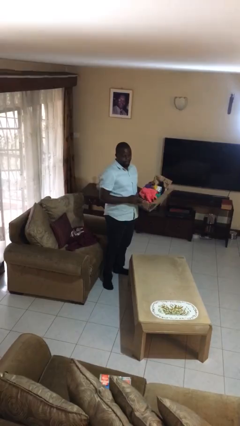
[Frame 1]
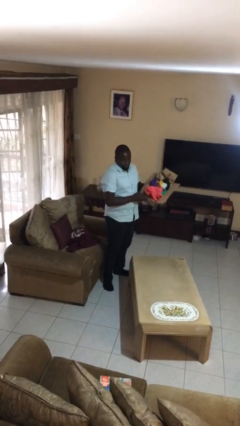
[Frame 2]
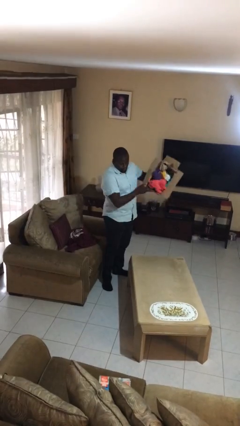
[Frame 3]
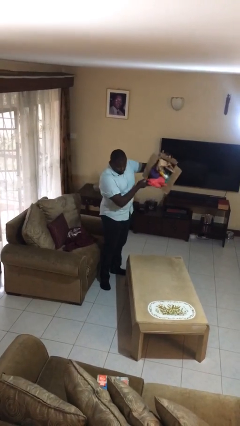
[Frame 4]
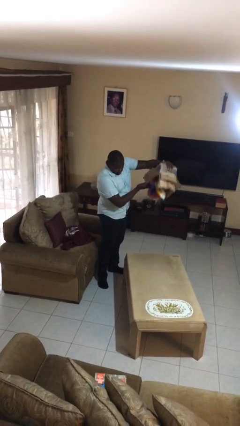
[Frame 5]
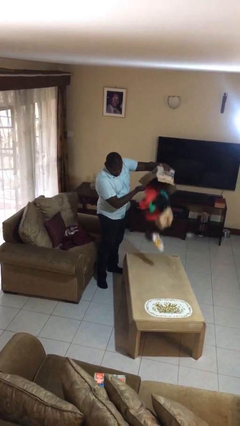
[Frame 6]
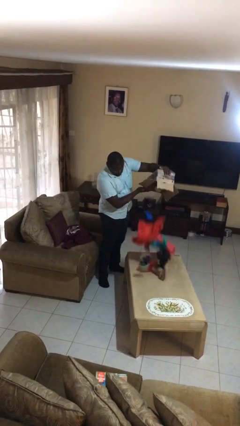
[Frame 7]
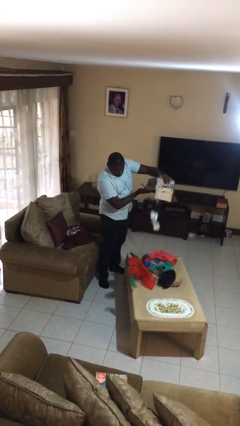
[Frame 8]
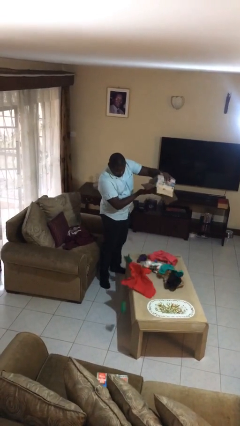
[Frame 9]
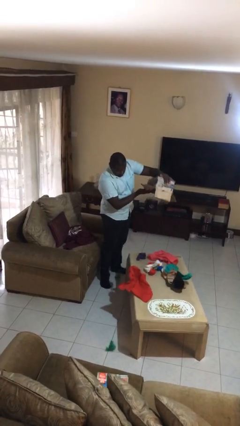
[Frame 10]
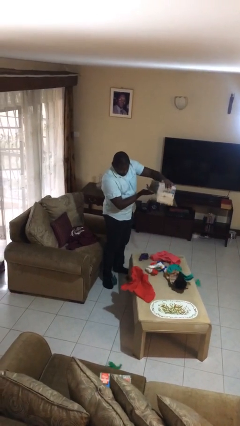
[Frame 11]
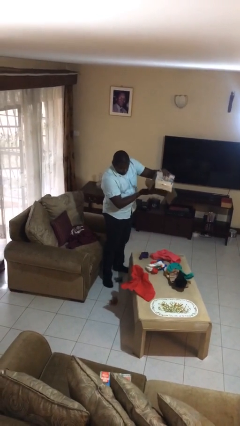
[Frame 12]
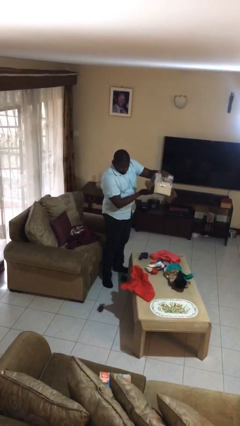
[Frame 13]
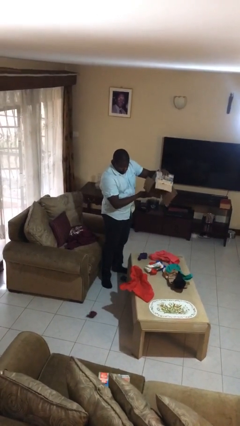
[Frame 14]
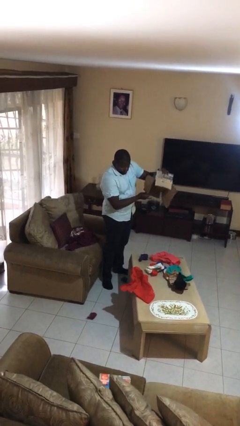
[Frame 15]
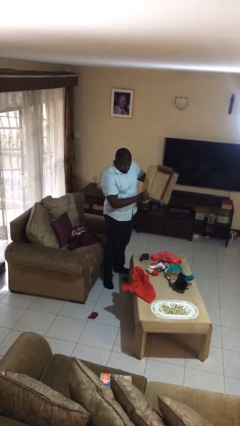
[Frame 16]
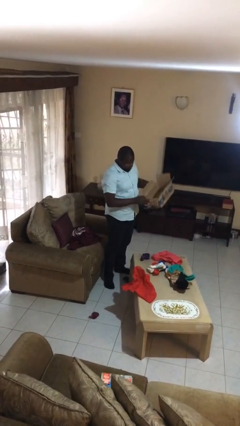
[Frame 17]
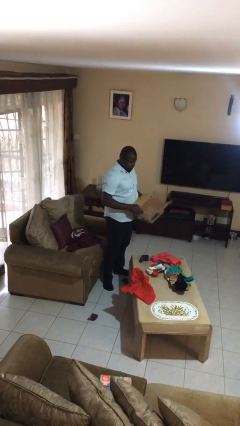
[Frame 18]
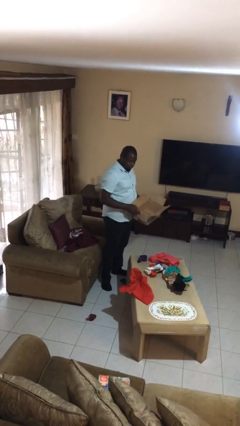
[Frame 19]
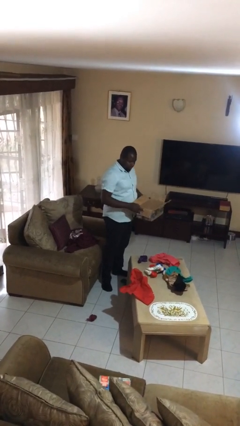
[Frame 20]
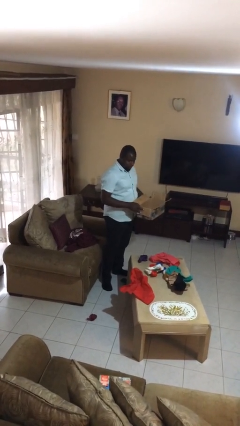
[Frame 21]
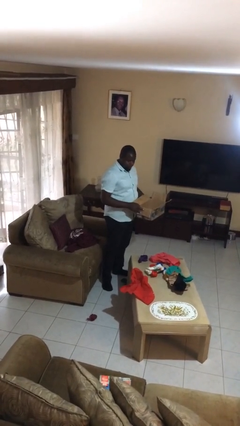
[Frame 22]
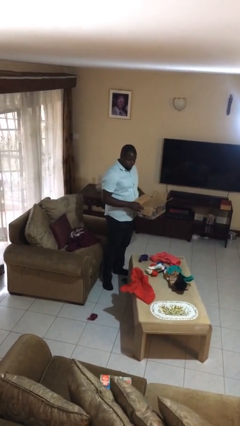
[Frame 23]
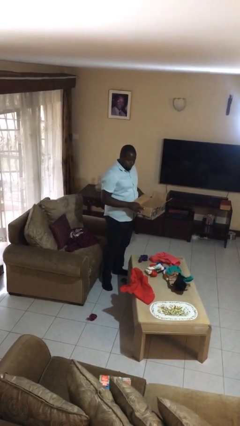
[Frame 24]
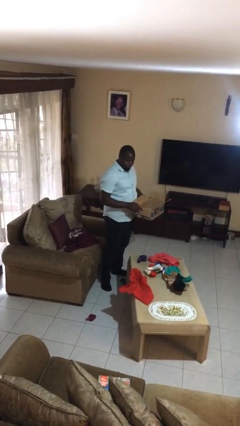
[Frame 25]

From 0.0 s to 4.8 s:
person unloads box onto table

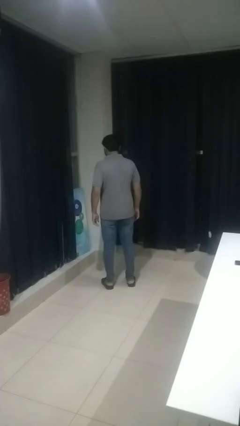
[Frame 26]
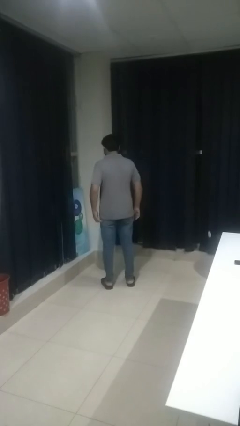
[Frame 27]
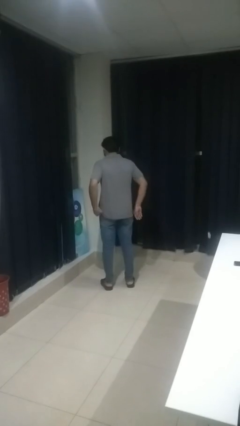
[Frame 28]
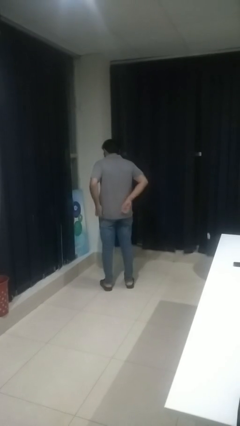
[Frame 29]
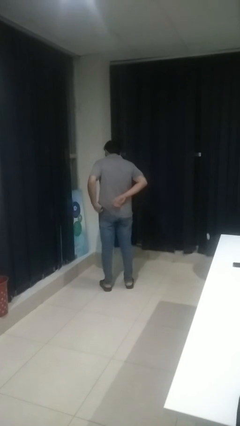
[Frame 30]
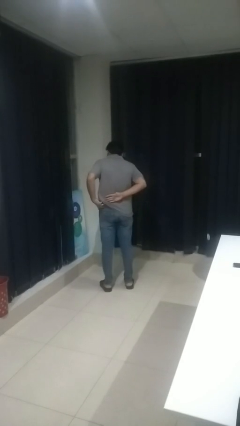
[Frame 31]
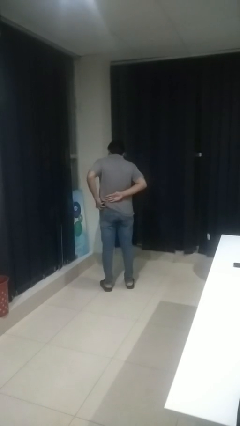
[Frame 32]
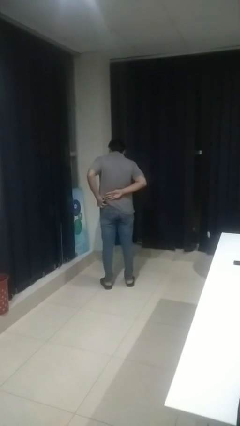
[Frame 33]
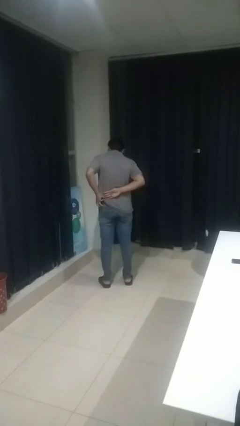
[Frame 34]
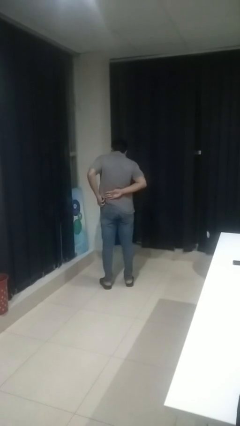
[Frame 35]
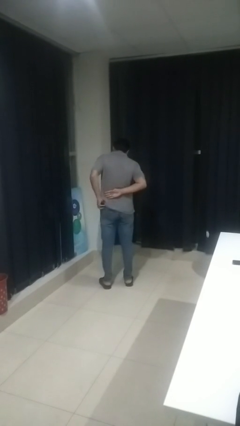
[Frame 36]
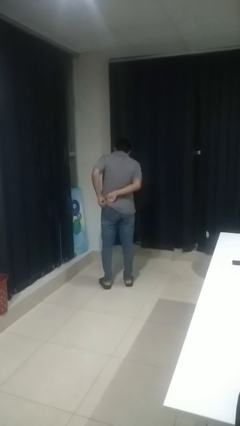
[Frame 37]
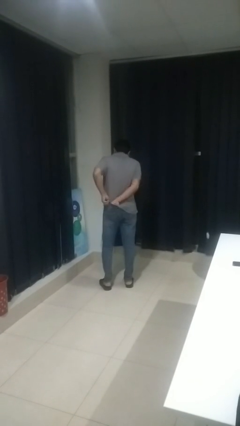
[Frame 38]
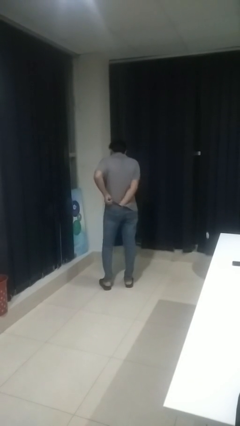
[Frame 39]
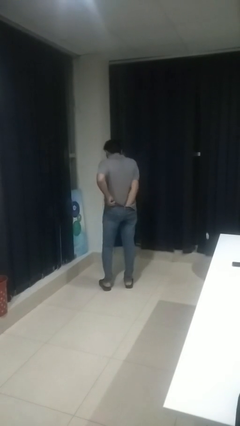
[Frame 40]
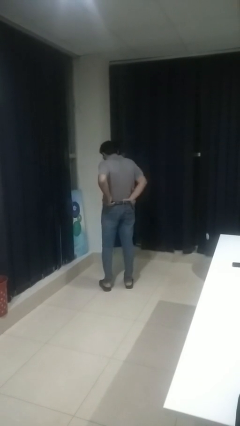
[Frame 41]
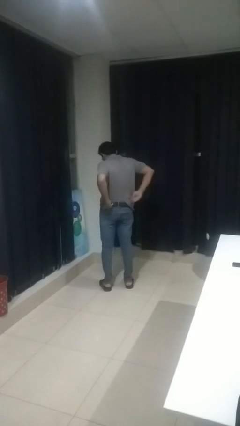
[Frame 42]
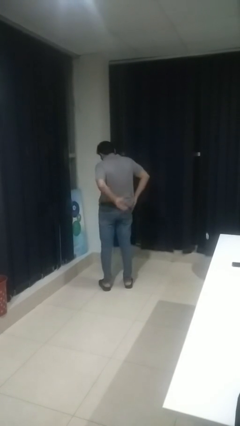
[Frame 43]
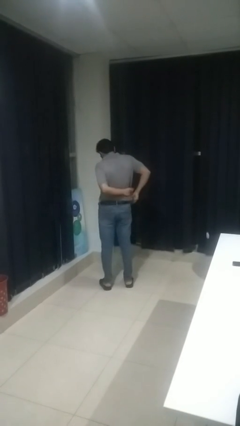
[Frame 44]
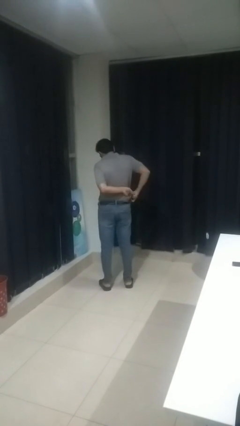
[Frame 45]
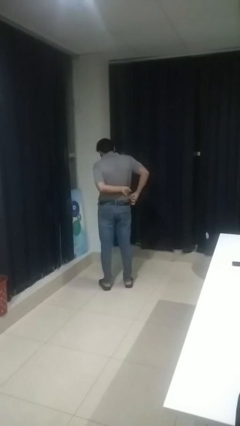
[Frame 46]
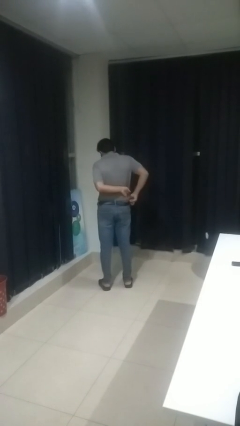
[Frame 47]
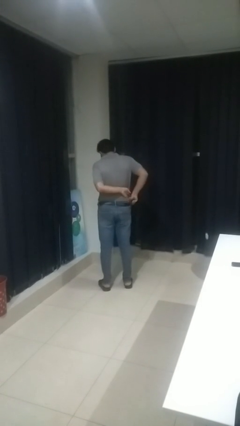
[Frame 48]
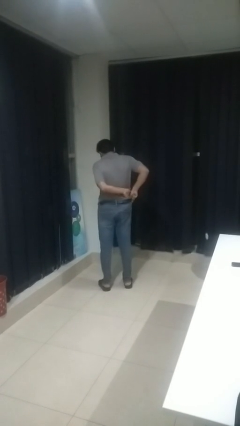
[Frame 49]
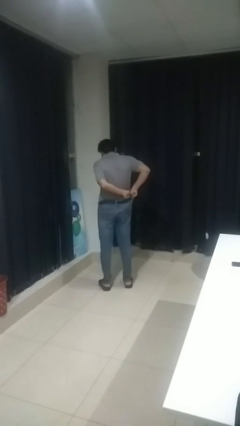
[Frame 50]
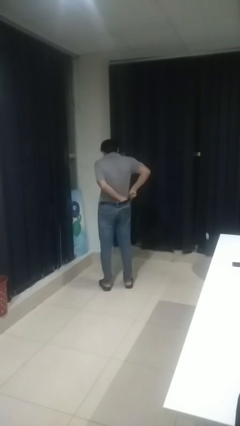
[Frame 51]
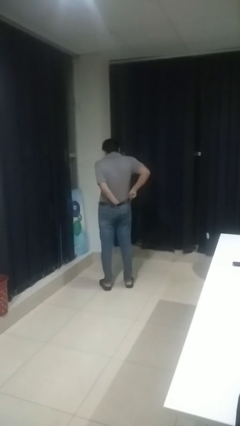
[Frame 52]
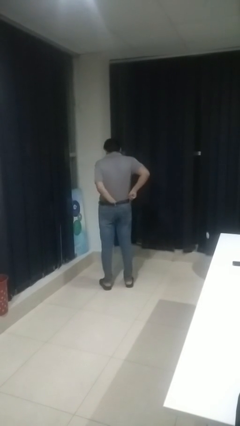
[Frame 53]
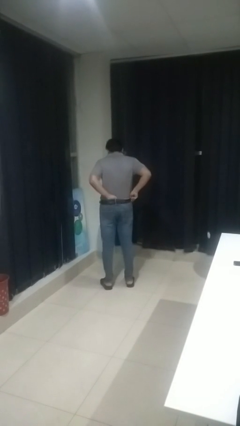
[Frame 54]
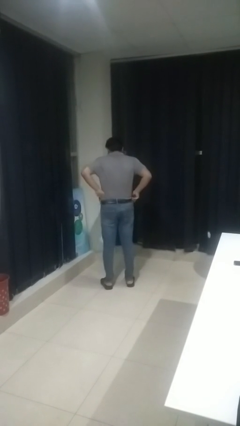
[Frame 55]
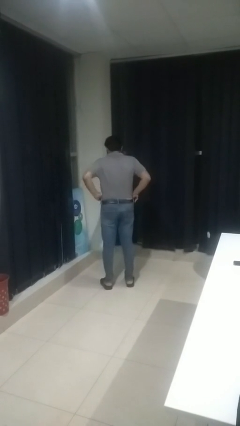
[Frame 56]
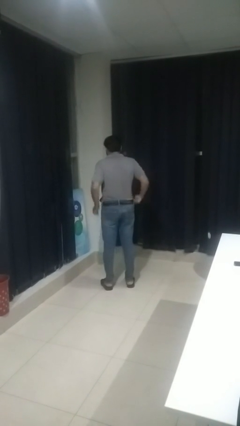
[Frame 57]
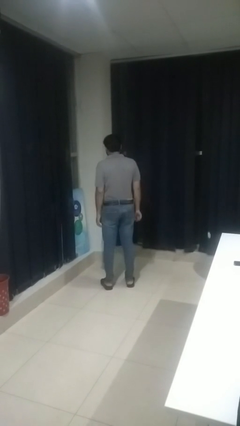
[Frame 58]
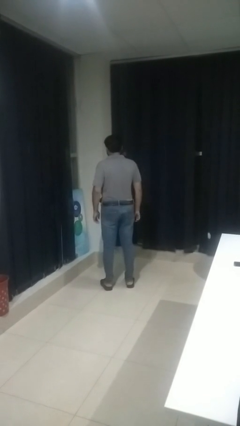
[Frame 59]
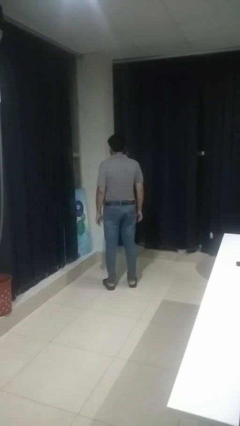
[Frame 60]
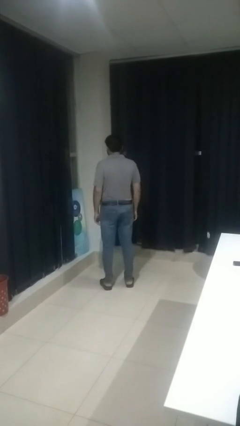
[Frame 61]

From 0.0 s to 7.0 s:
person tucks in shirt

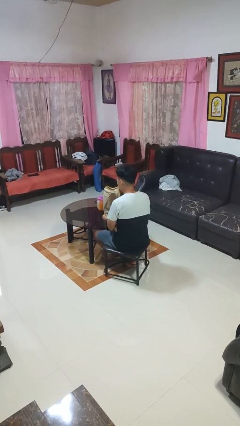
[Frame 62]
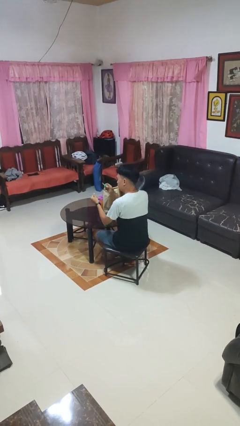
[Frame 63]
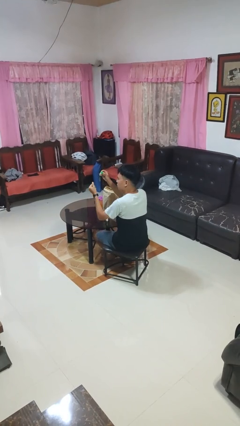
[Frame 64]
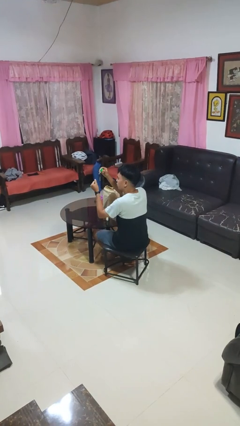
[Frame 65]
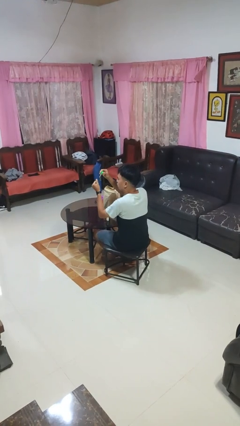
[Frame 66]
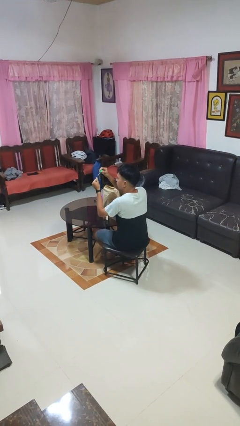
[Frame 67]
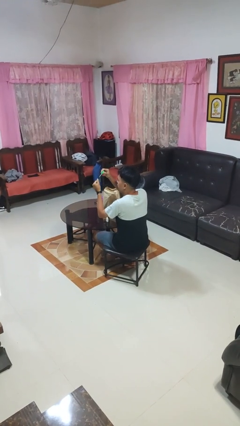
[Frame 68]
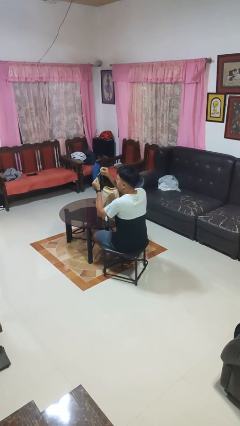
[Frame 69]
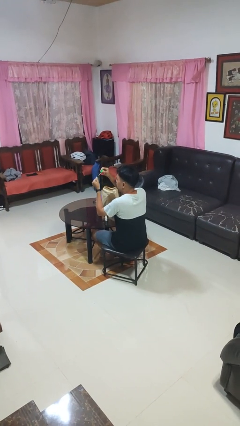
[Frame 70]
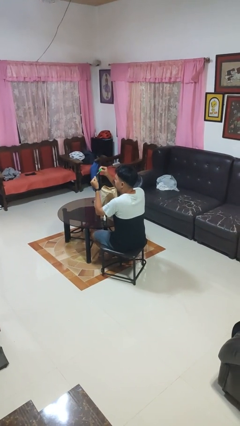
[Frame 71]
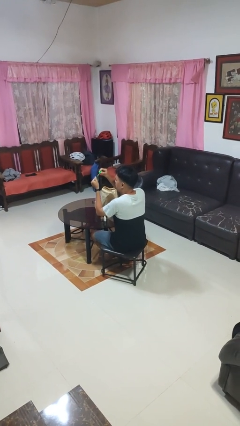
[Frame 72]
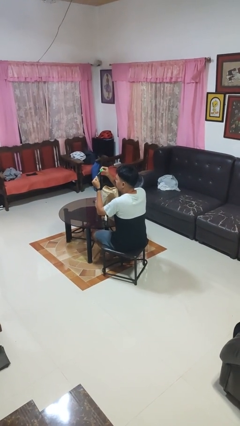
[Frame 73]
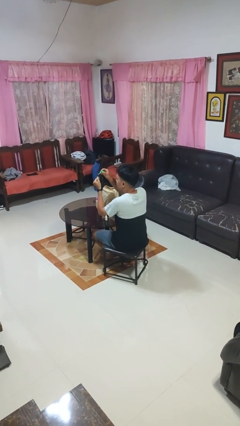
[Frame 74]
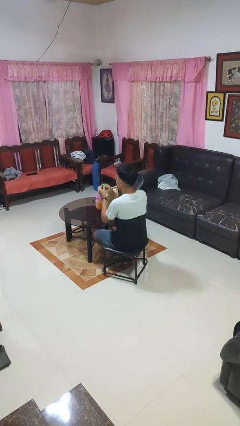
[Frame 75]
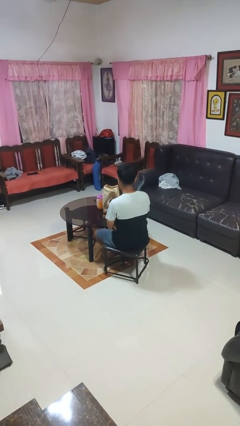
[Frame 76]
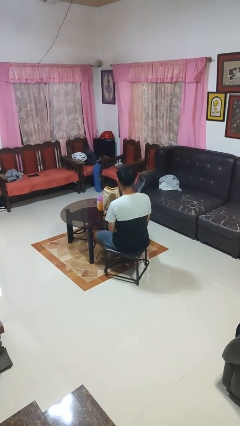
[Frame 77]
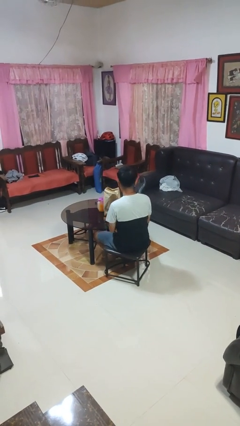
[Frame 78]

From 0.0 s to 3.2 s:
person paints fingernails

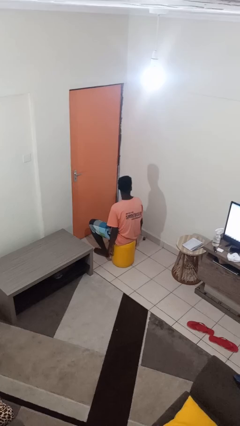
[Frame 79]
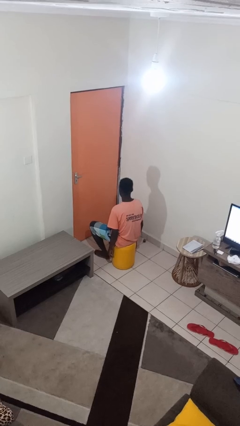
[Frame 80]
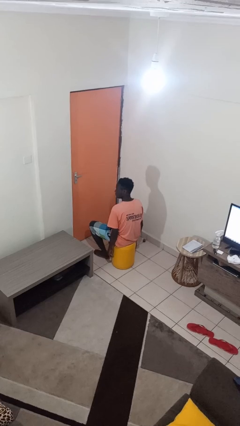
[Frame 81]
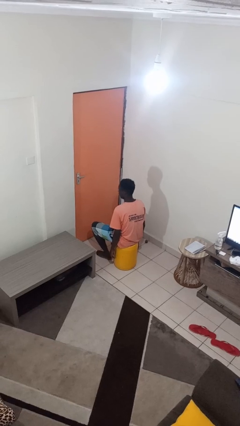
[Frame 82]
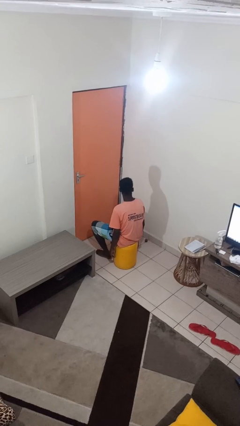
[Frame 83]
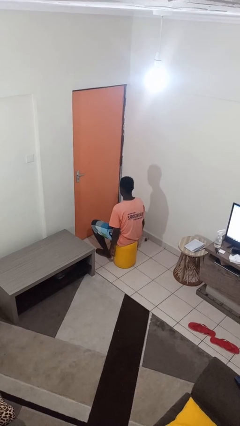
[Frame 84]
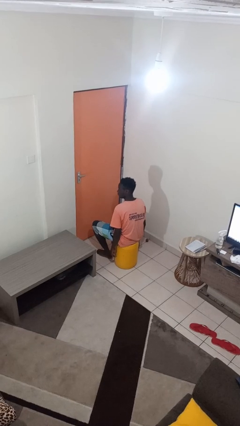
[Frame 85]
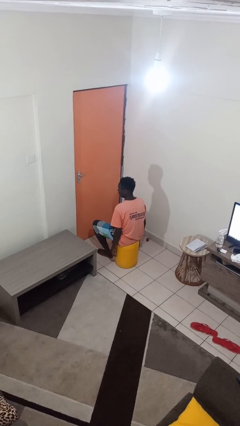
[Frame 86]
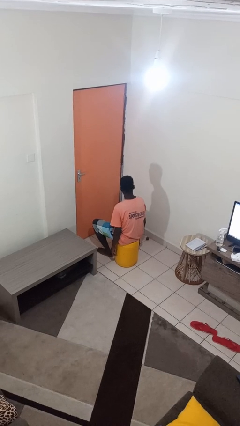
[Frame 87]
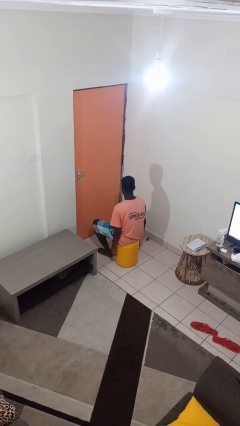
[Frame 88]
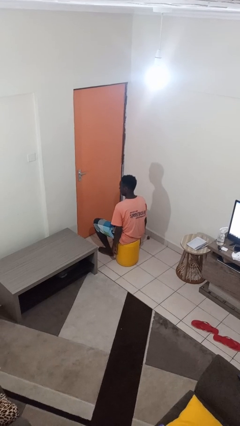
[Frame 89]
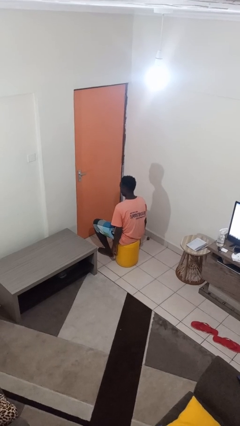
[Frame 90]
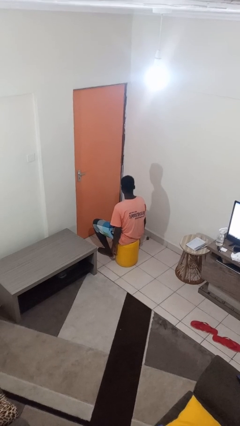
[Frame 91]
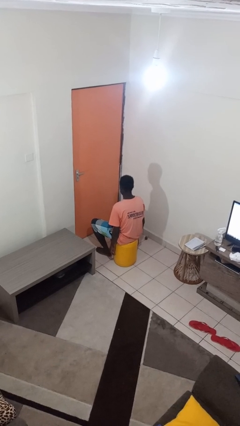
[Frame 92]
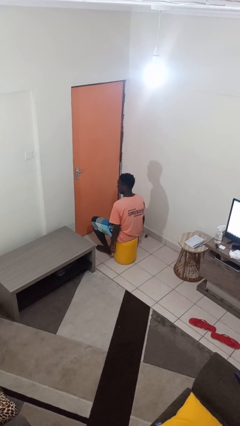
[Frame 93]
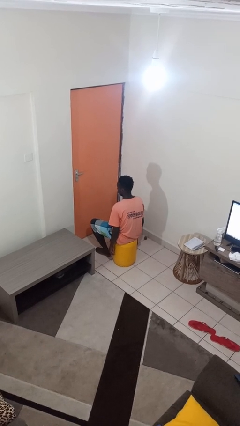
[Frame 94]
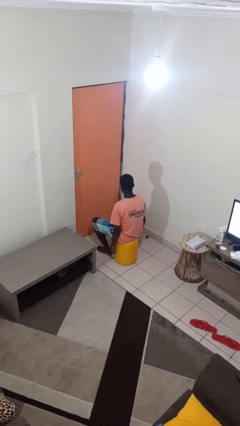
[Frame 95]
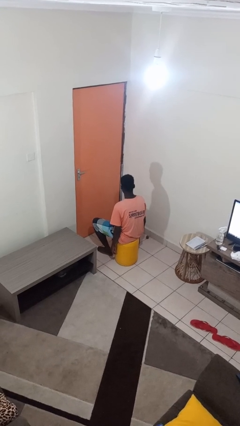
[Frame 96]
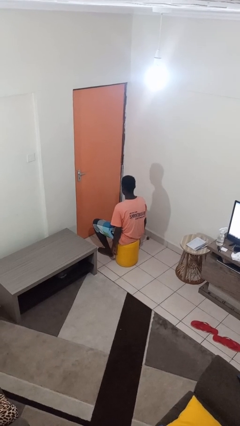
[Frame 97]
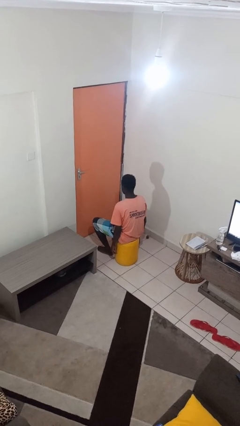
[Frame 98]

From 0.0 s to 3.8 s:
person shakes head
